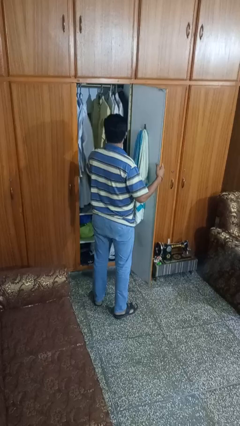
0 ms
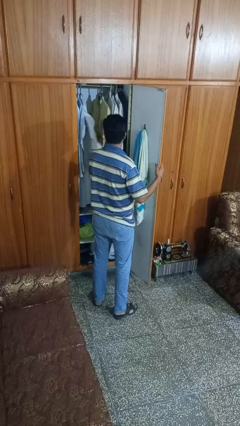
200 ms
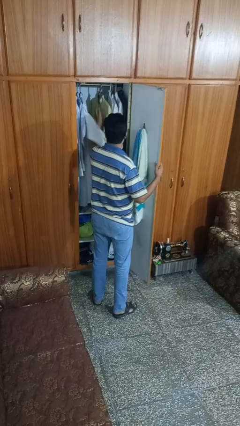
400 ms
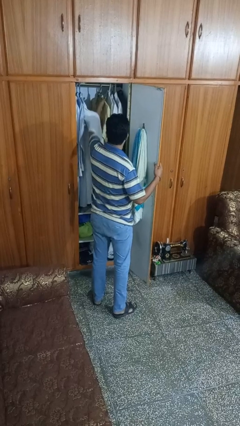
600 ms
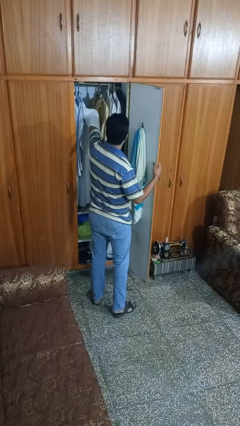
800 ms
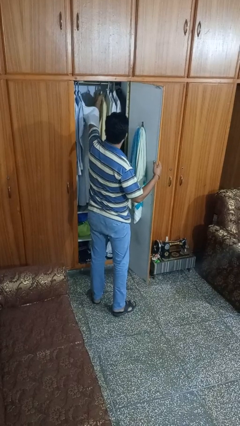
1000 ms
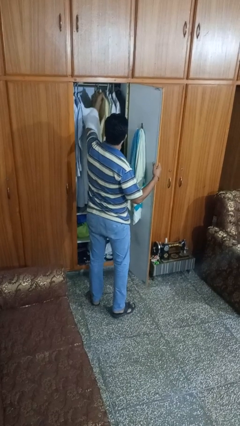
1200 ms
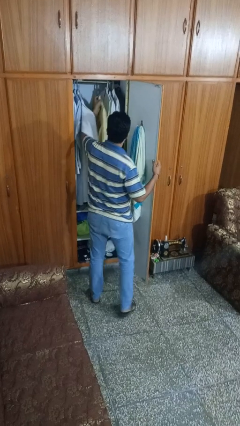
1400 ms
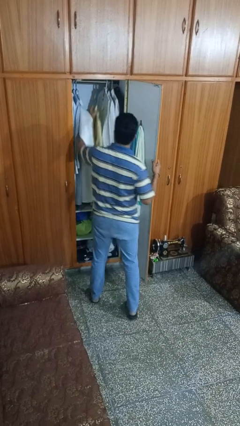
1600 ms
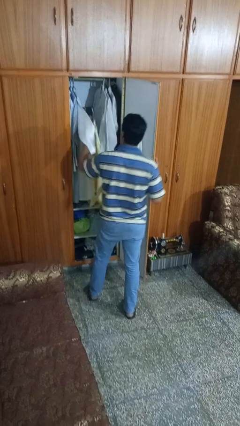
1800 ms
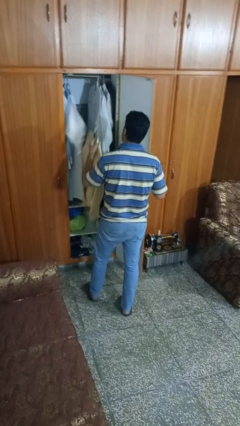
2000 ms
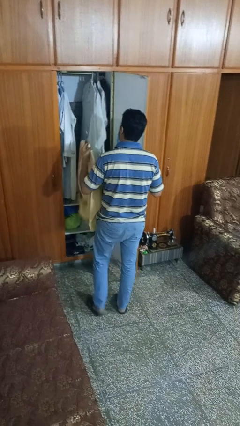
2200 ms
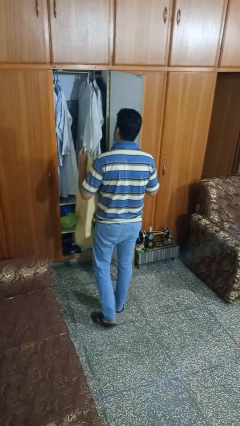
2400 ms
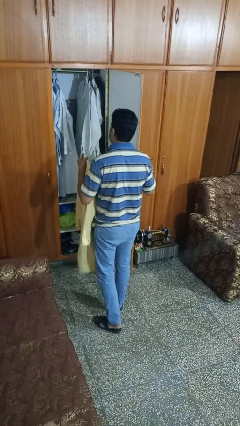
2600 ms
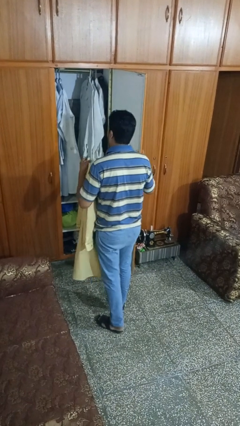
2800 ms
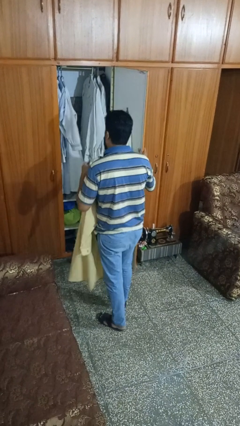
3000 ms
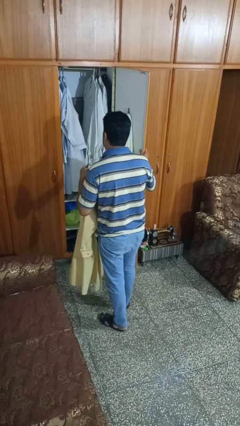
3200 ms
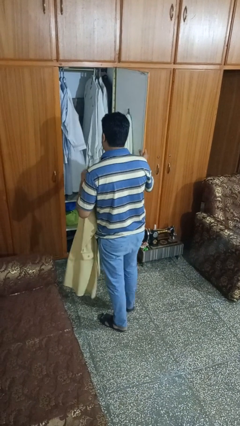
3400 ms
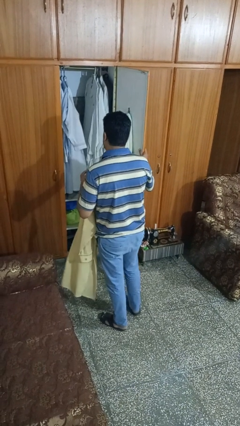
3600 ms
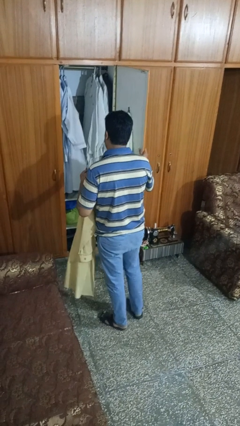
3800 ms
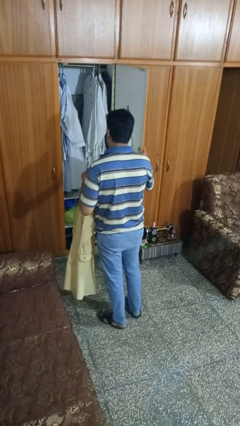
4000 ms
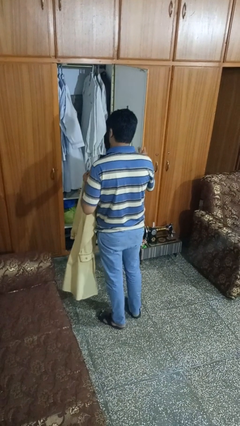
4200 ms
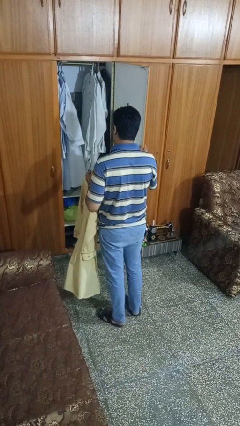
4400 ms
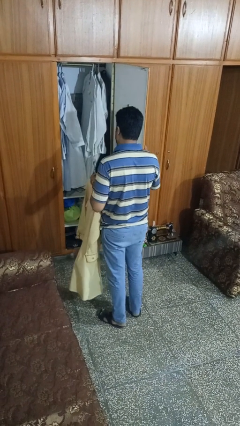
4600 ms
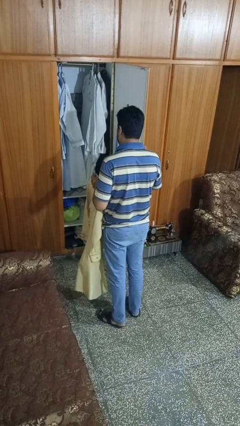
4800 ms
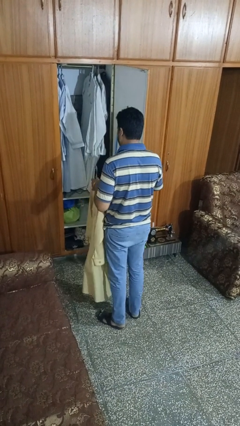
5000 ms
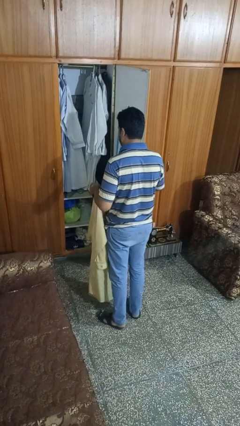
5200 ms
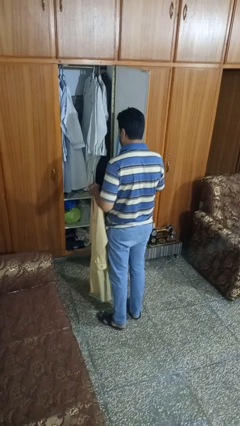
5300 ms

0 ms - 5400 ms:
person takes clothes from dresser

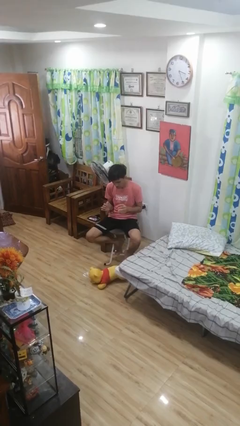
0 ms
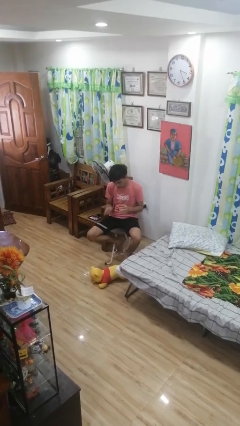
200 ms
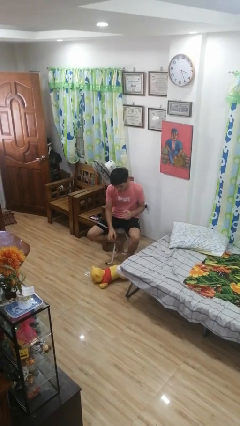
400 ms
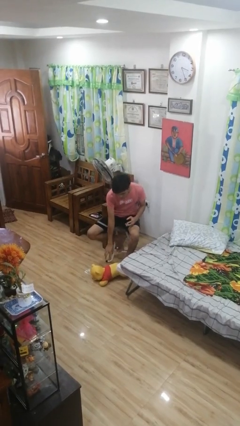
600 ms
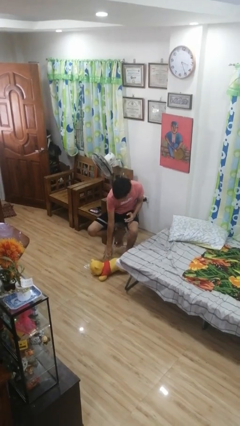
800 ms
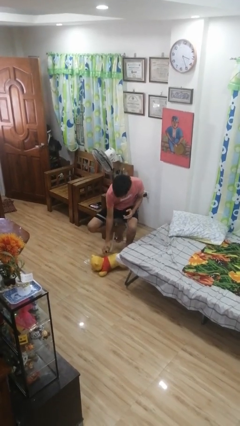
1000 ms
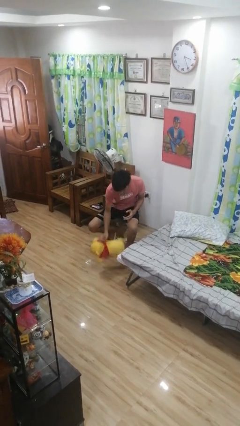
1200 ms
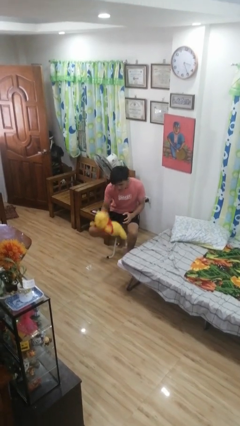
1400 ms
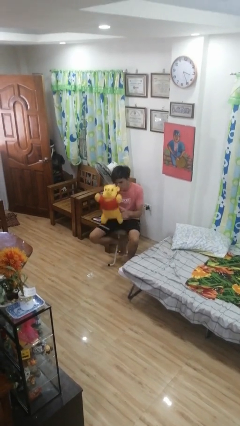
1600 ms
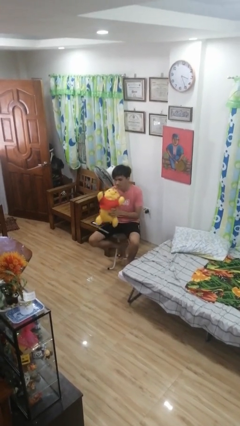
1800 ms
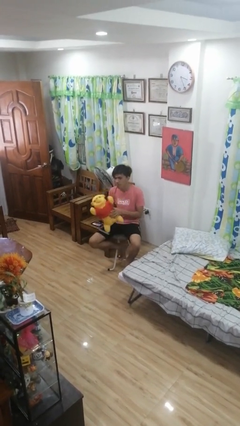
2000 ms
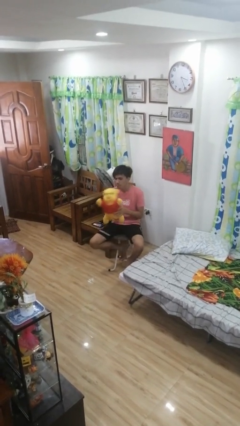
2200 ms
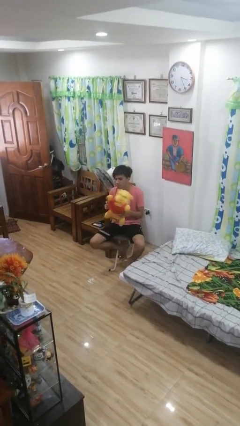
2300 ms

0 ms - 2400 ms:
person picks up object from floor

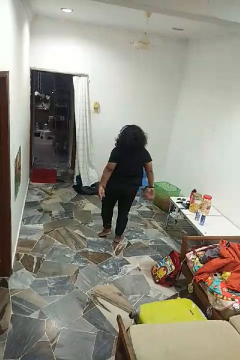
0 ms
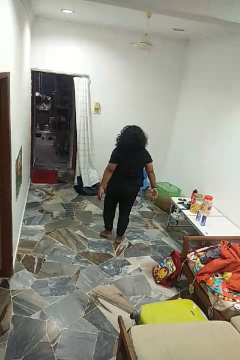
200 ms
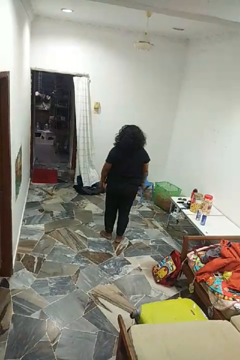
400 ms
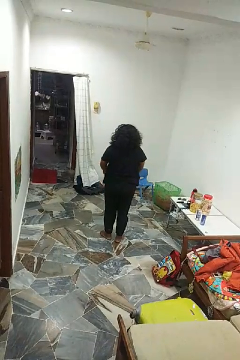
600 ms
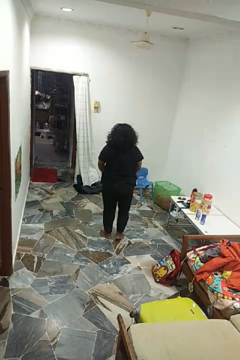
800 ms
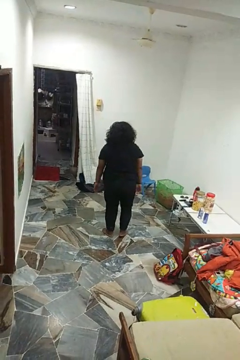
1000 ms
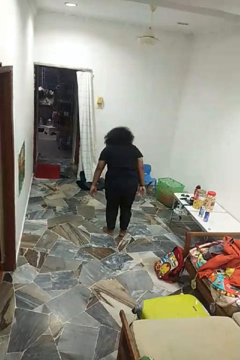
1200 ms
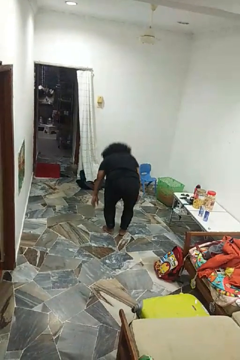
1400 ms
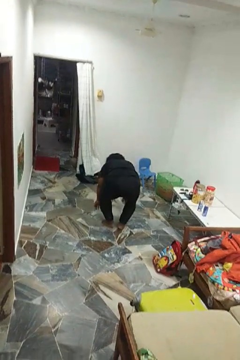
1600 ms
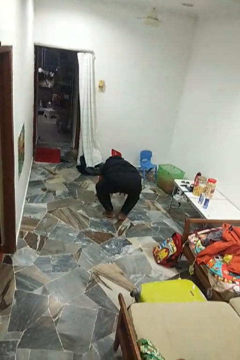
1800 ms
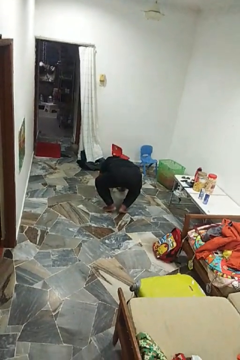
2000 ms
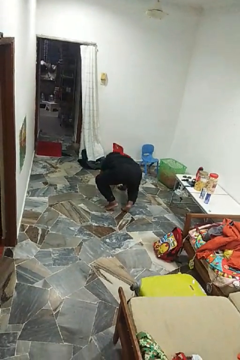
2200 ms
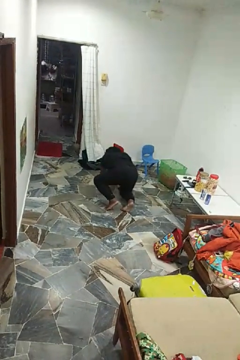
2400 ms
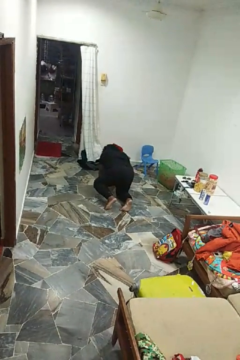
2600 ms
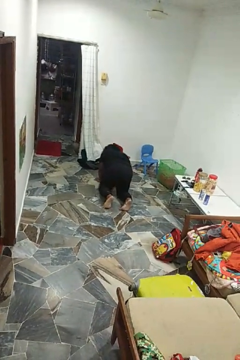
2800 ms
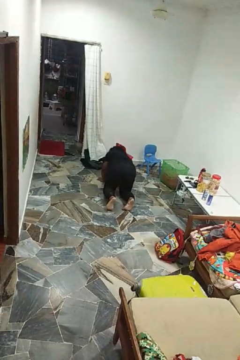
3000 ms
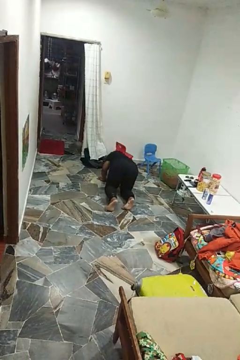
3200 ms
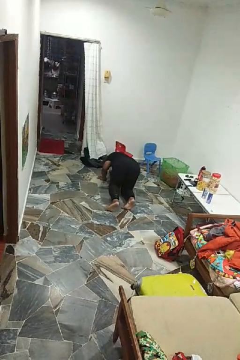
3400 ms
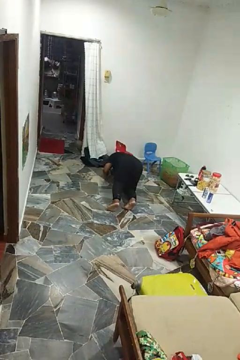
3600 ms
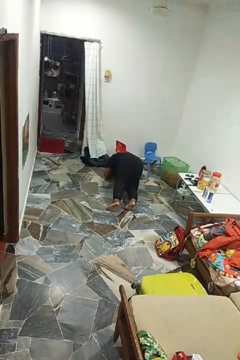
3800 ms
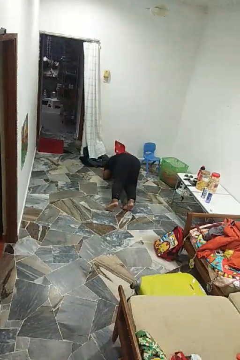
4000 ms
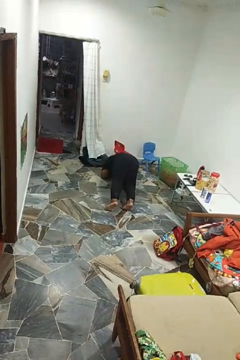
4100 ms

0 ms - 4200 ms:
person exercises with plank

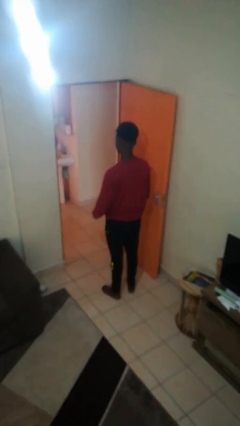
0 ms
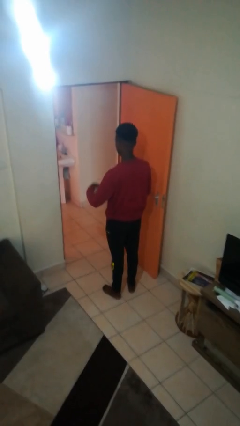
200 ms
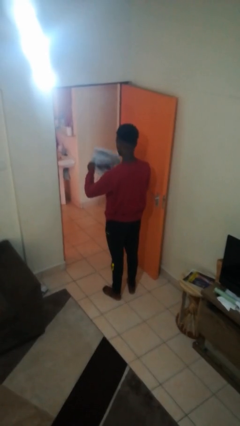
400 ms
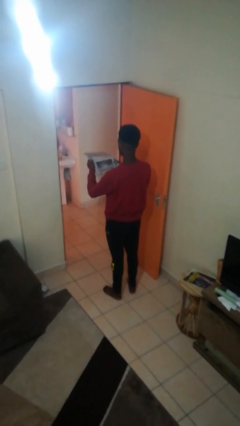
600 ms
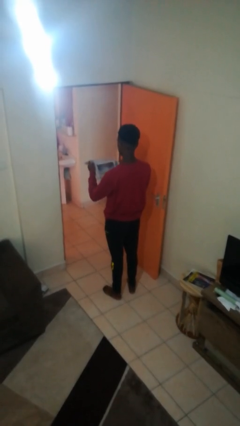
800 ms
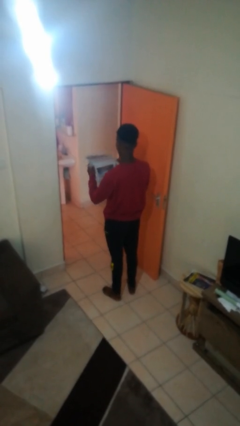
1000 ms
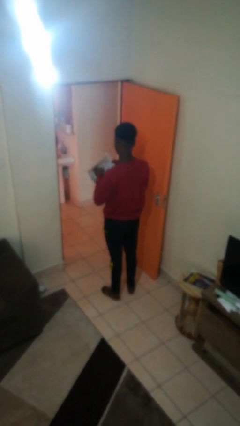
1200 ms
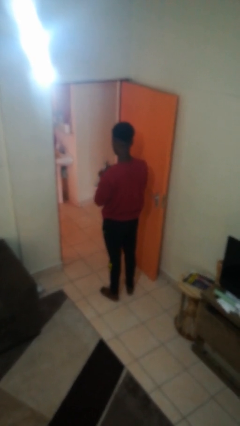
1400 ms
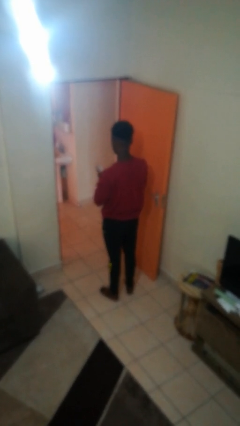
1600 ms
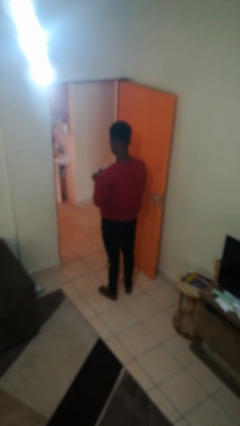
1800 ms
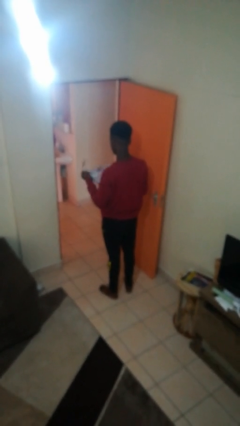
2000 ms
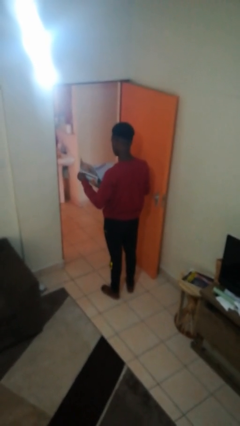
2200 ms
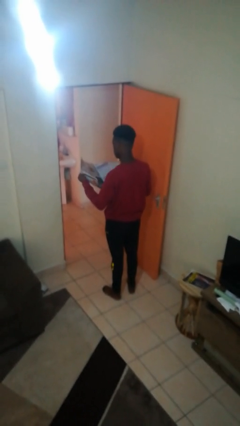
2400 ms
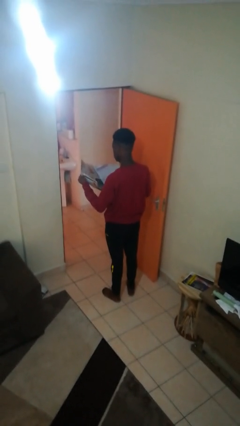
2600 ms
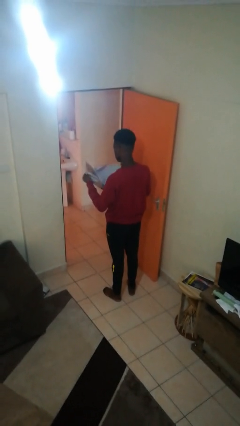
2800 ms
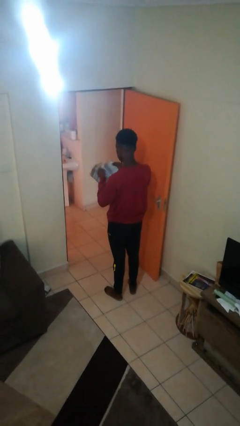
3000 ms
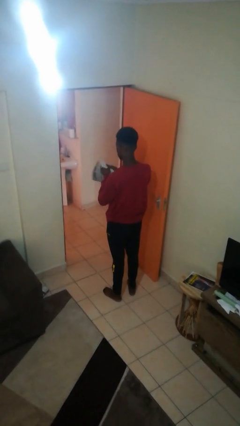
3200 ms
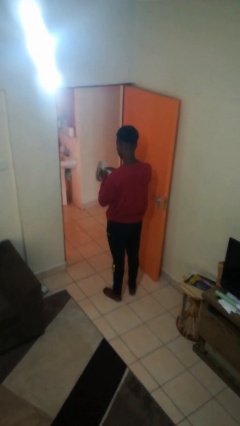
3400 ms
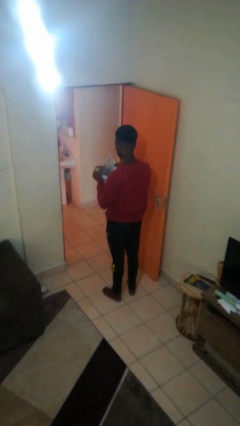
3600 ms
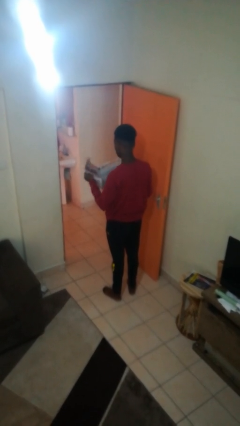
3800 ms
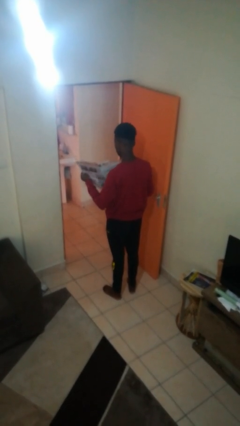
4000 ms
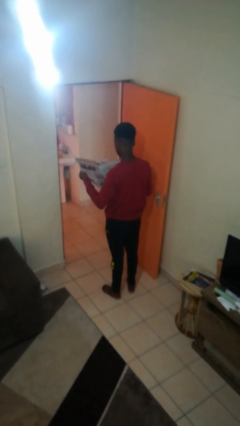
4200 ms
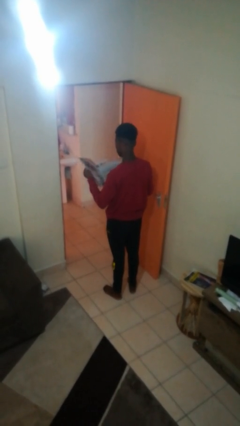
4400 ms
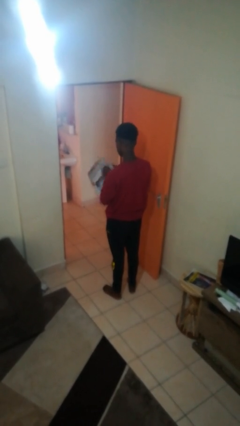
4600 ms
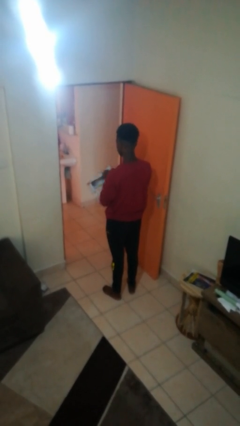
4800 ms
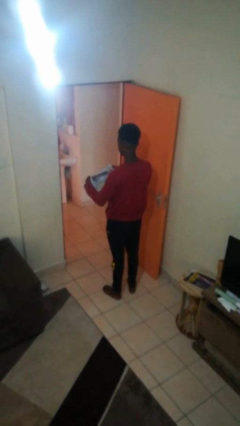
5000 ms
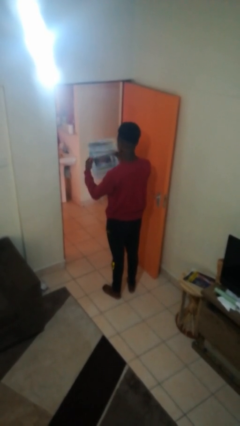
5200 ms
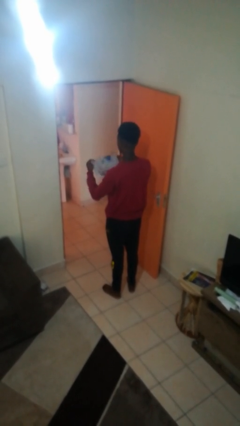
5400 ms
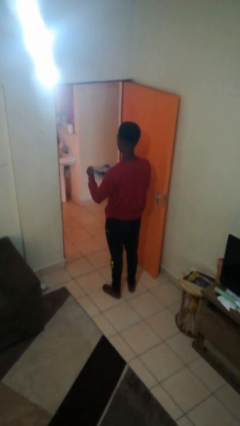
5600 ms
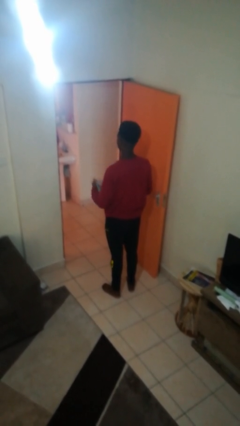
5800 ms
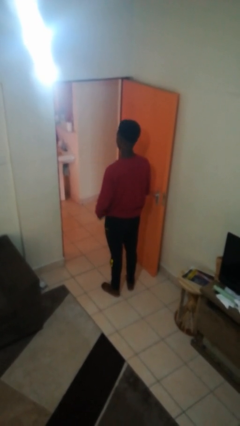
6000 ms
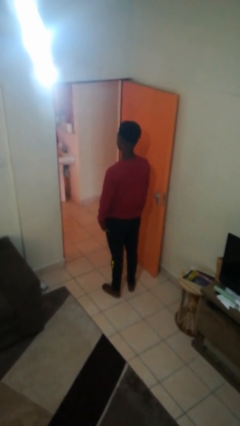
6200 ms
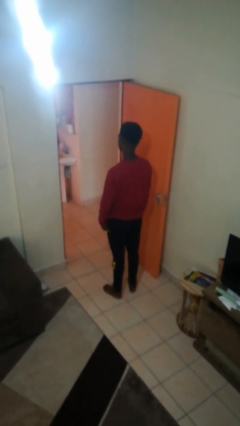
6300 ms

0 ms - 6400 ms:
person reads newspaper

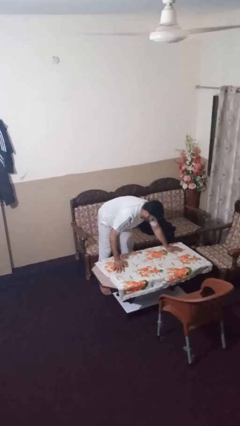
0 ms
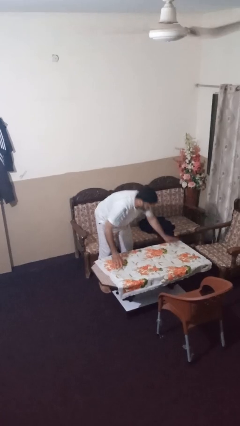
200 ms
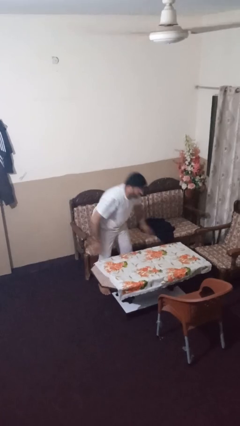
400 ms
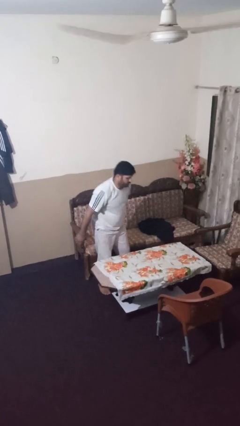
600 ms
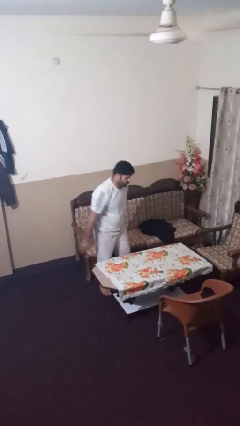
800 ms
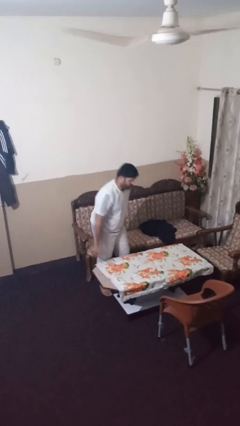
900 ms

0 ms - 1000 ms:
person folds tablecloth
